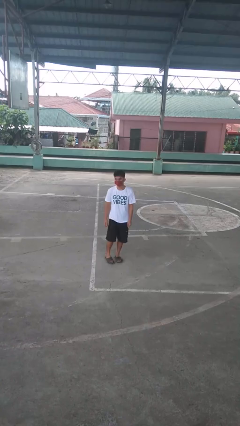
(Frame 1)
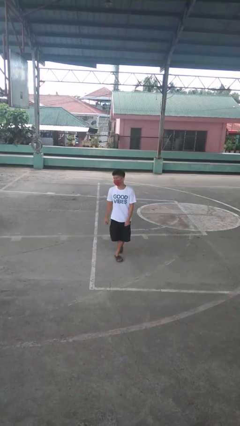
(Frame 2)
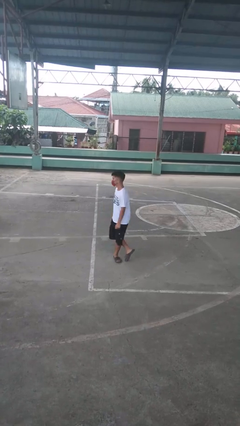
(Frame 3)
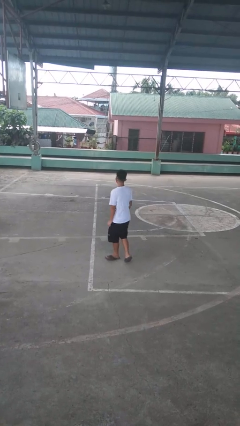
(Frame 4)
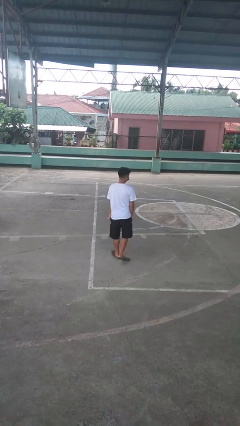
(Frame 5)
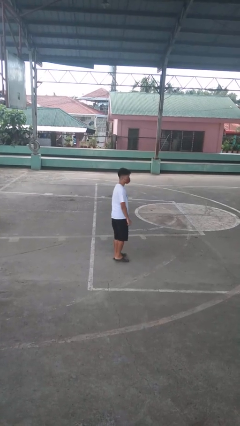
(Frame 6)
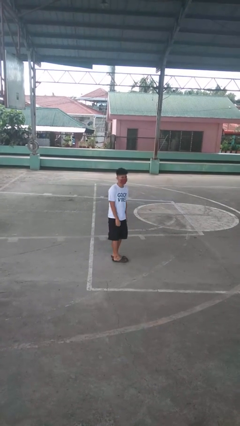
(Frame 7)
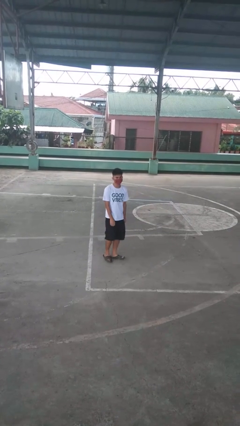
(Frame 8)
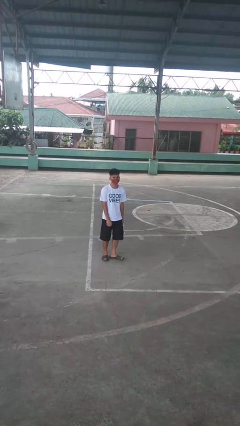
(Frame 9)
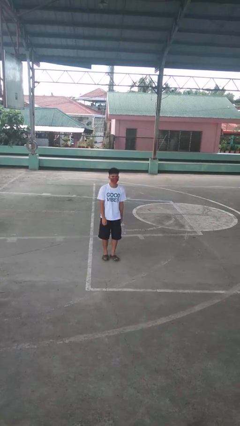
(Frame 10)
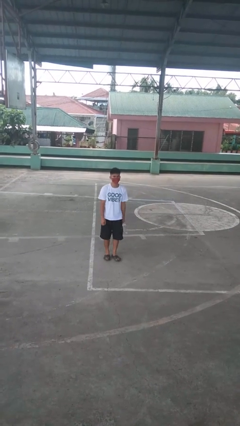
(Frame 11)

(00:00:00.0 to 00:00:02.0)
person twirls

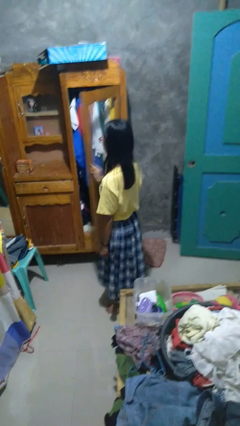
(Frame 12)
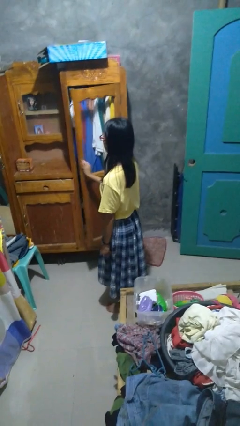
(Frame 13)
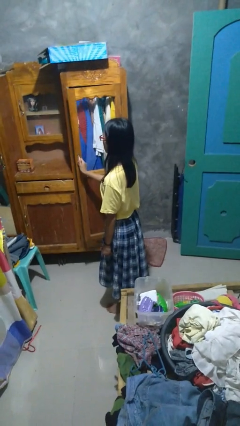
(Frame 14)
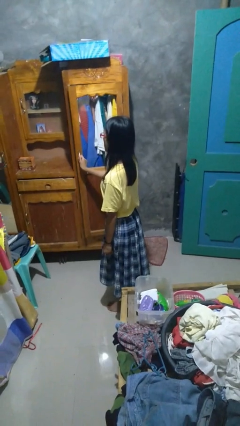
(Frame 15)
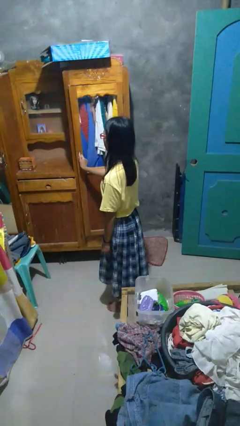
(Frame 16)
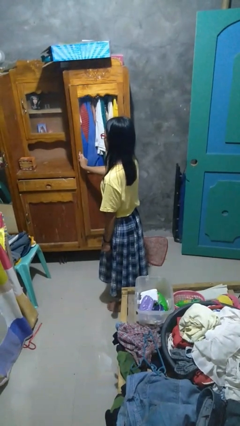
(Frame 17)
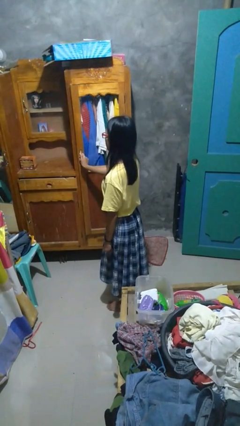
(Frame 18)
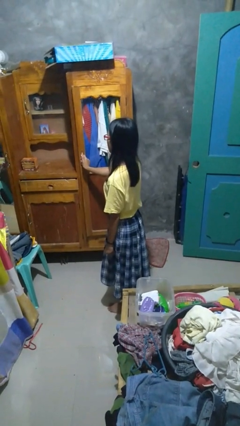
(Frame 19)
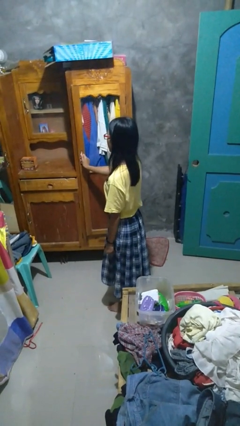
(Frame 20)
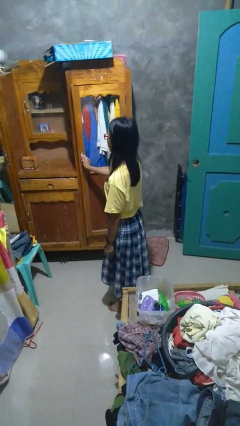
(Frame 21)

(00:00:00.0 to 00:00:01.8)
person closes closet door

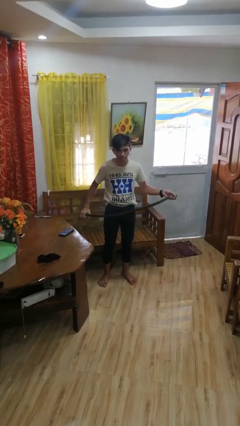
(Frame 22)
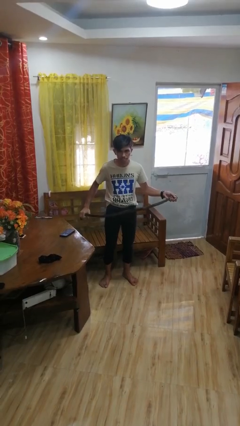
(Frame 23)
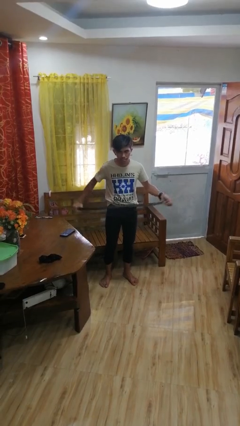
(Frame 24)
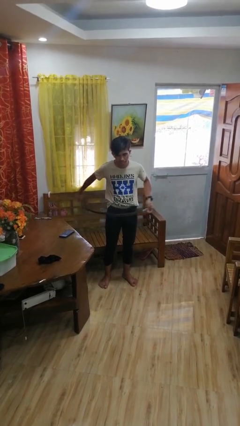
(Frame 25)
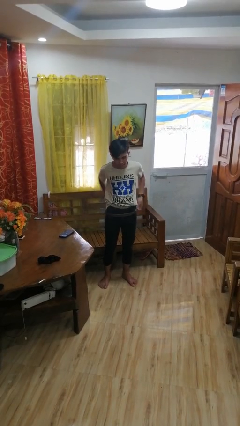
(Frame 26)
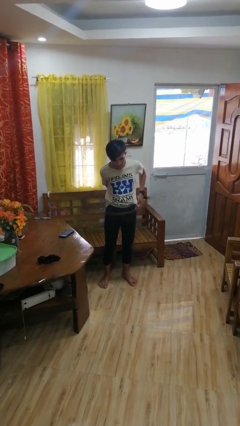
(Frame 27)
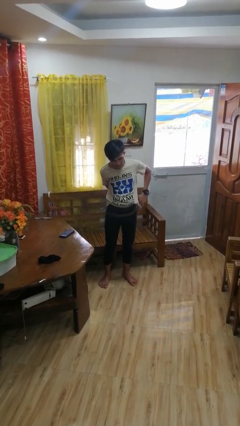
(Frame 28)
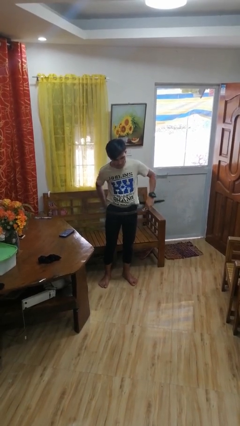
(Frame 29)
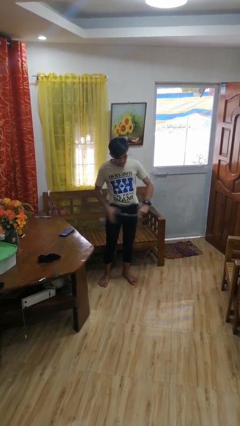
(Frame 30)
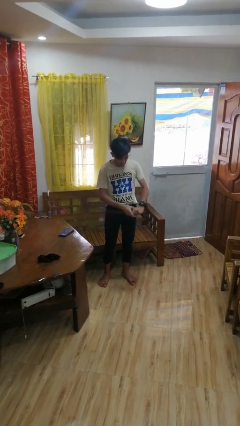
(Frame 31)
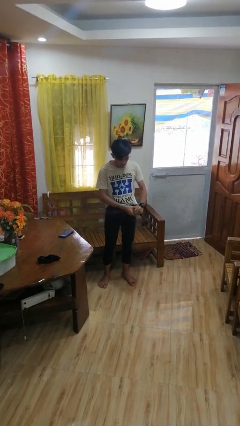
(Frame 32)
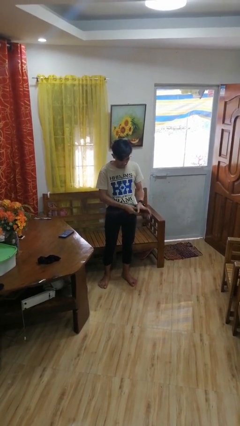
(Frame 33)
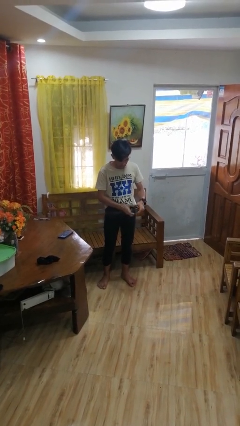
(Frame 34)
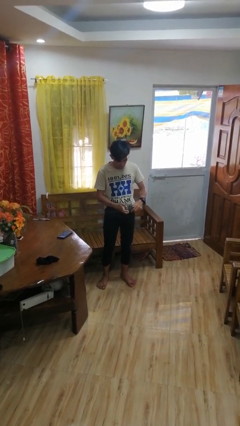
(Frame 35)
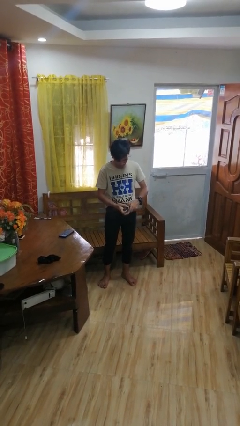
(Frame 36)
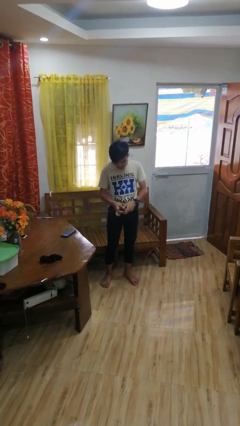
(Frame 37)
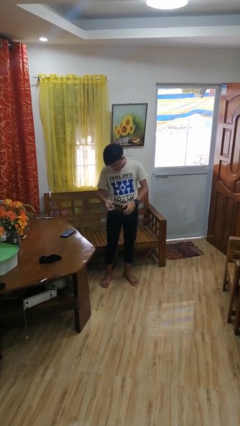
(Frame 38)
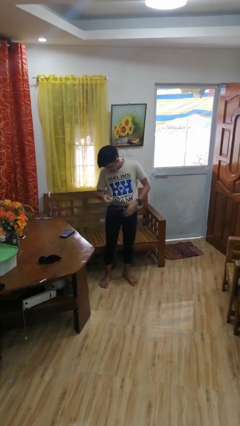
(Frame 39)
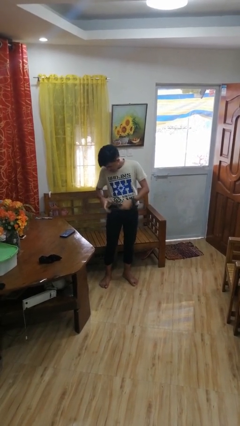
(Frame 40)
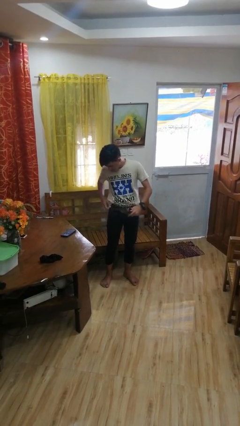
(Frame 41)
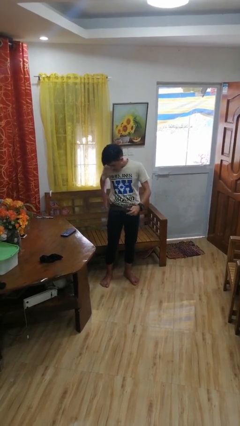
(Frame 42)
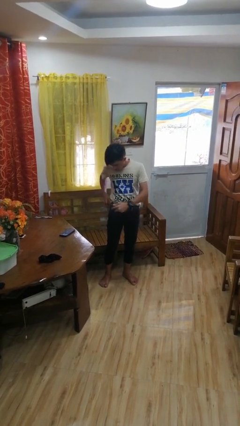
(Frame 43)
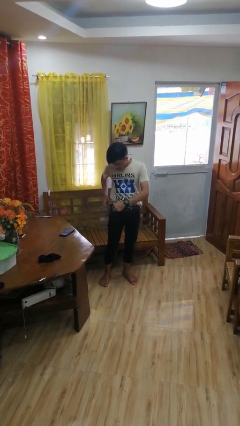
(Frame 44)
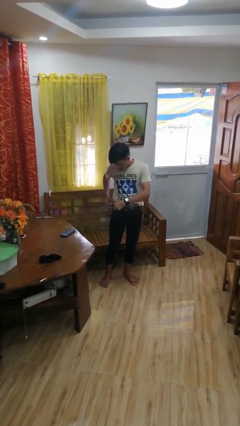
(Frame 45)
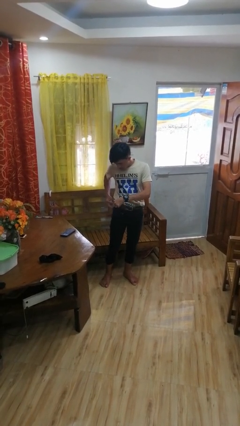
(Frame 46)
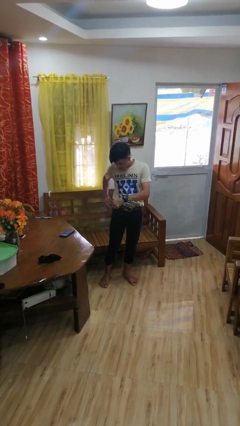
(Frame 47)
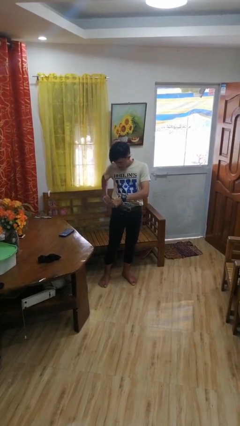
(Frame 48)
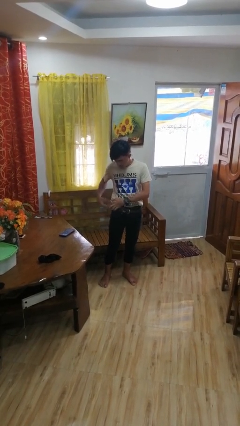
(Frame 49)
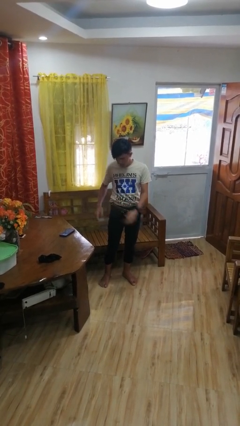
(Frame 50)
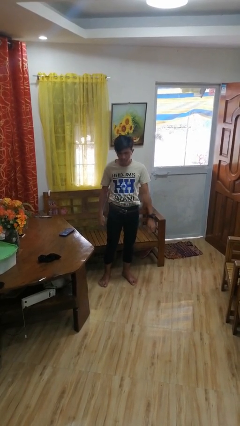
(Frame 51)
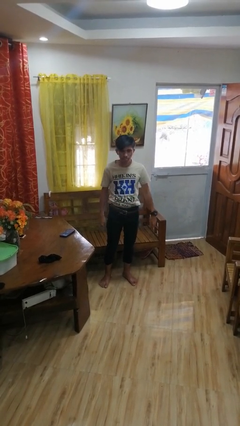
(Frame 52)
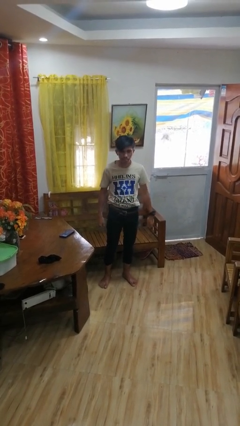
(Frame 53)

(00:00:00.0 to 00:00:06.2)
person puts on belt

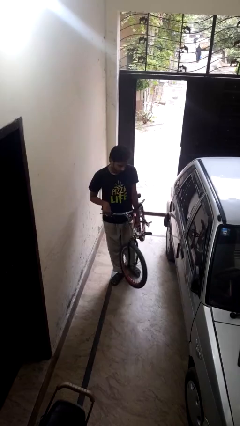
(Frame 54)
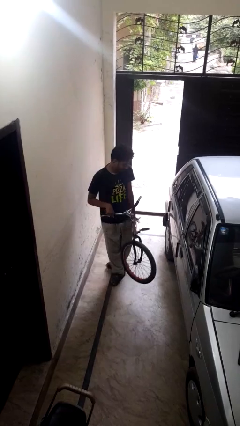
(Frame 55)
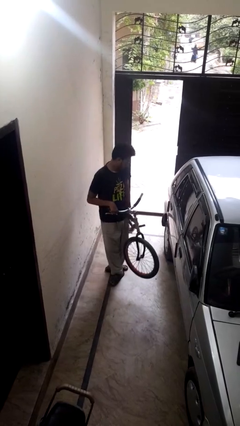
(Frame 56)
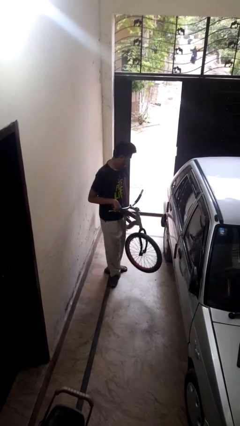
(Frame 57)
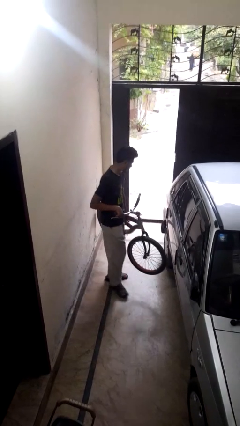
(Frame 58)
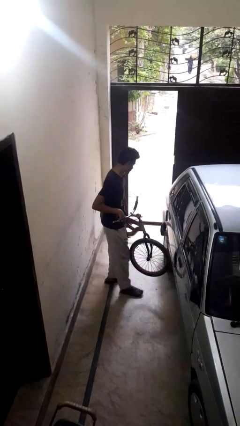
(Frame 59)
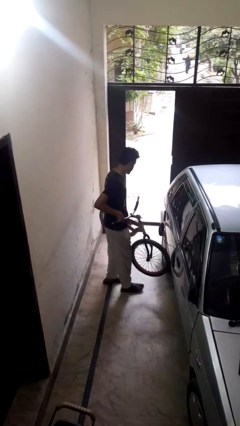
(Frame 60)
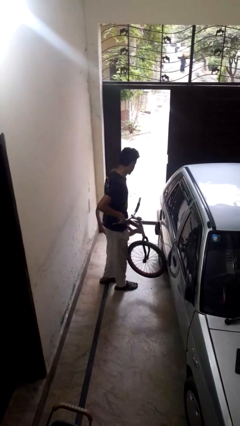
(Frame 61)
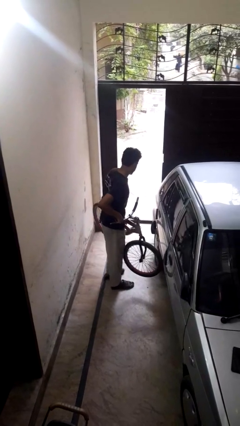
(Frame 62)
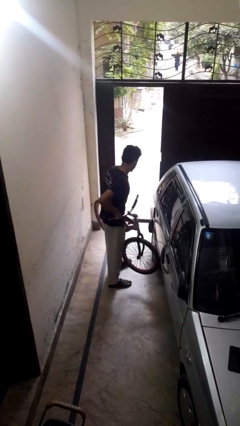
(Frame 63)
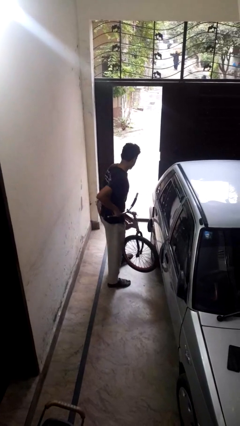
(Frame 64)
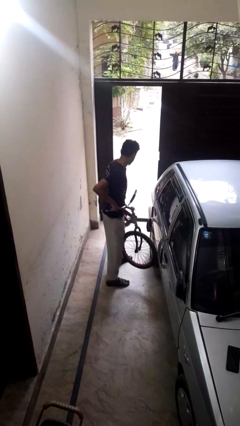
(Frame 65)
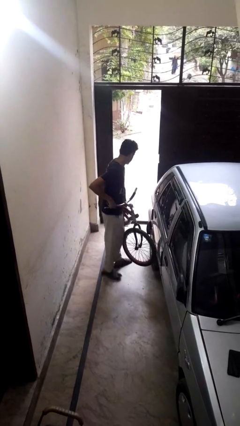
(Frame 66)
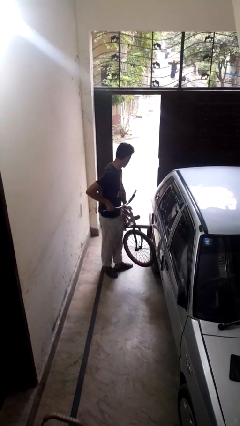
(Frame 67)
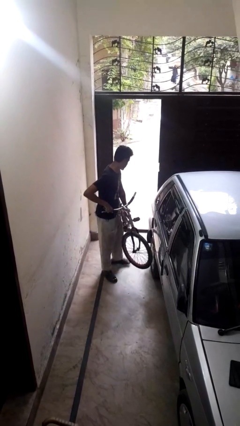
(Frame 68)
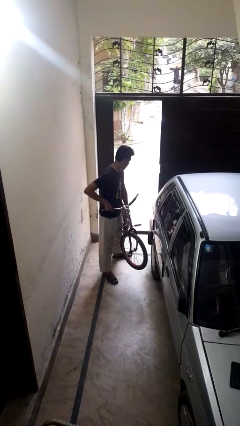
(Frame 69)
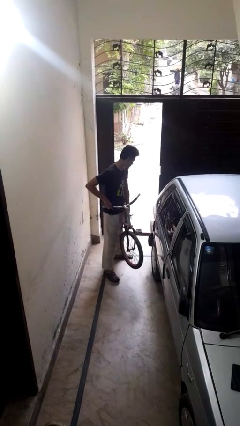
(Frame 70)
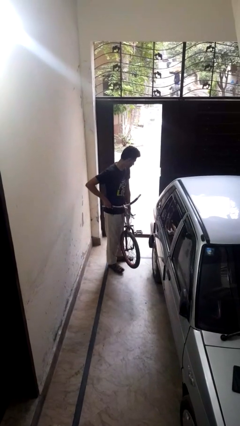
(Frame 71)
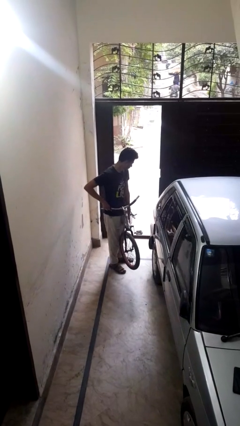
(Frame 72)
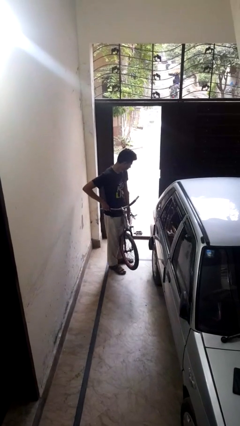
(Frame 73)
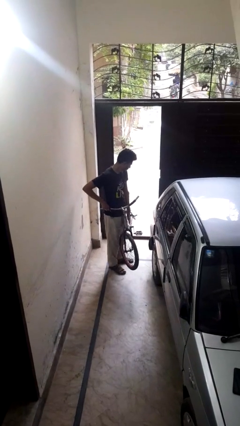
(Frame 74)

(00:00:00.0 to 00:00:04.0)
person carries bicycle

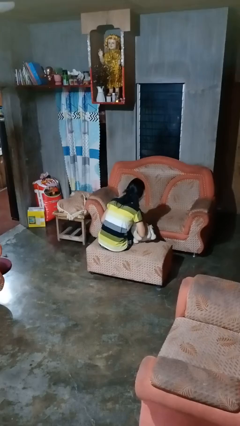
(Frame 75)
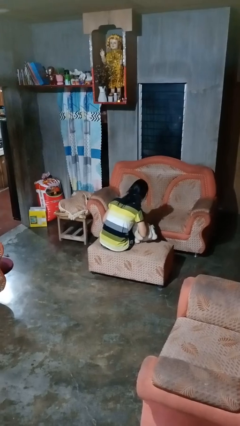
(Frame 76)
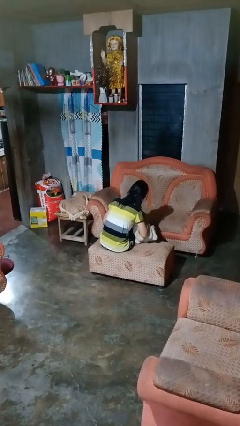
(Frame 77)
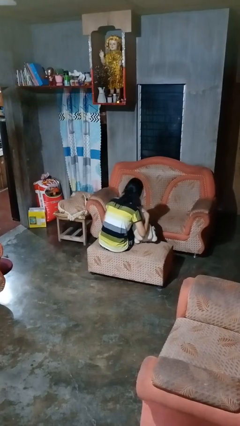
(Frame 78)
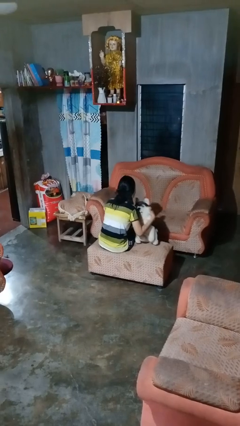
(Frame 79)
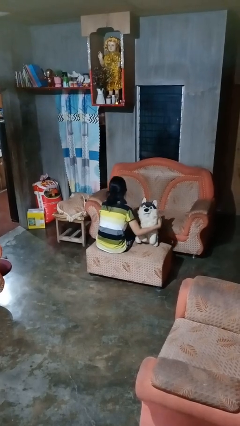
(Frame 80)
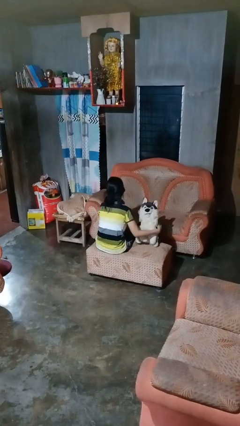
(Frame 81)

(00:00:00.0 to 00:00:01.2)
person hugs stuffed animal

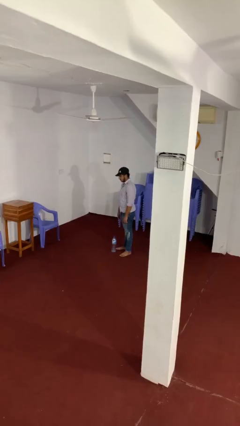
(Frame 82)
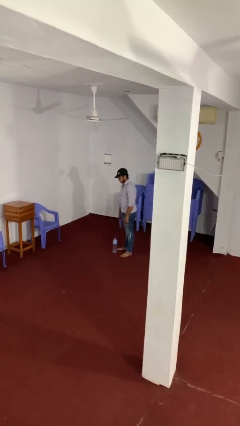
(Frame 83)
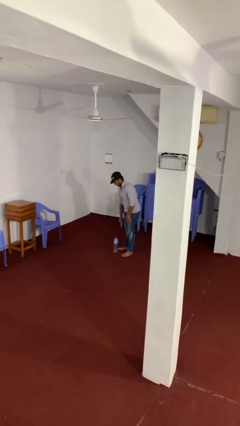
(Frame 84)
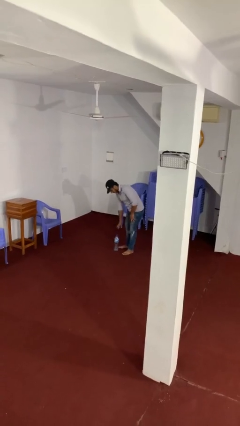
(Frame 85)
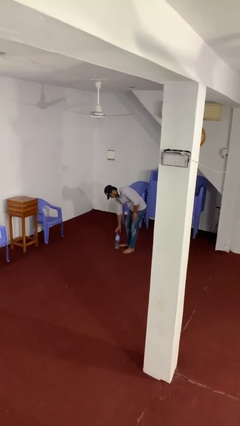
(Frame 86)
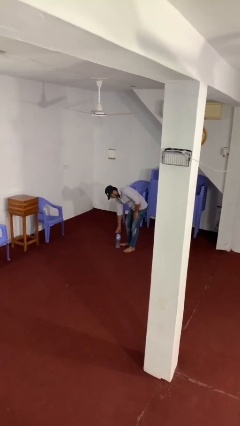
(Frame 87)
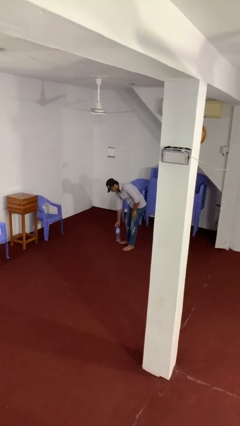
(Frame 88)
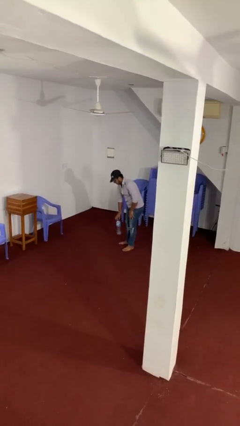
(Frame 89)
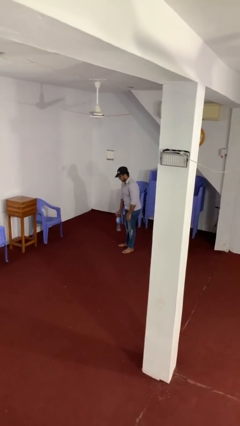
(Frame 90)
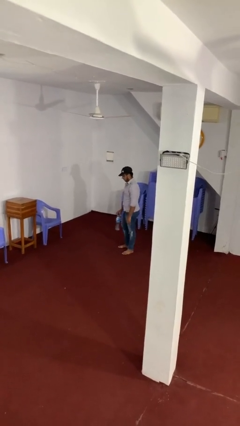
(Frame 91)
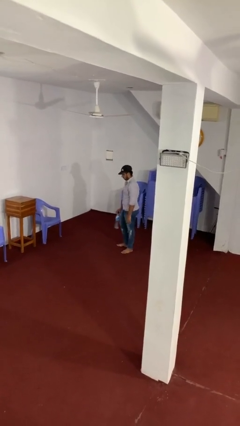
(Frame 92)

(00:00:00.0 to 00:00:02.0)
person picks up object from floor

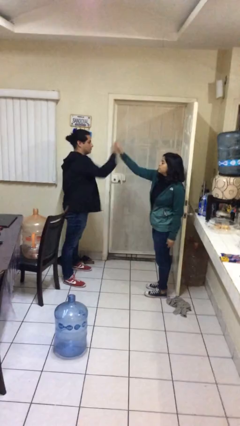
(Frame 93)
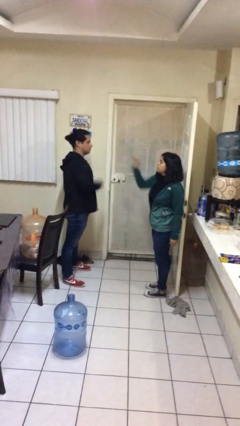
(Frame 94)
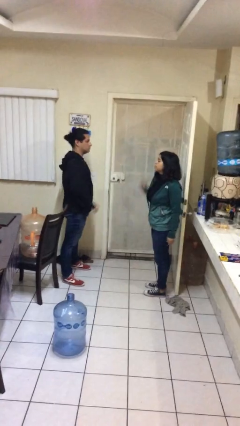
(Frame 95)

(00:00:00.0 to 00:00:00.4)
person highfives hand
